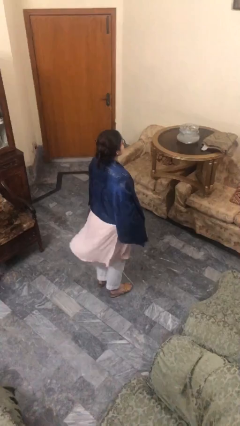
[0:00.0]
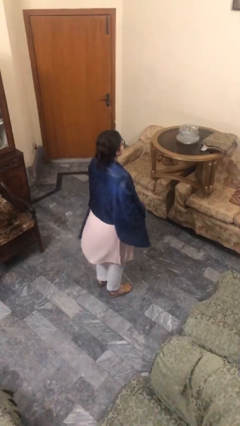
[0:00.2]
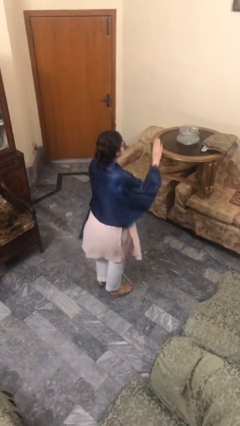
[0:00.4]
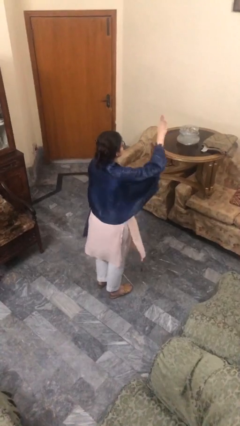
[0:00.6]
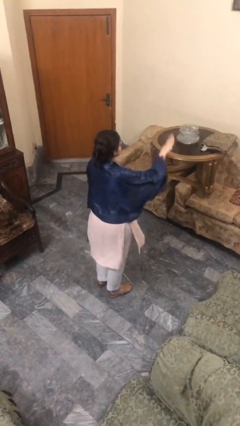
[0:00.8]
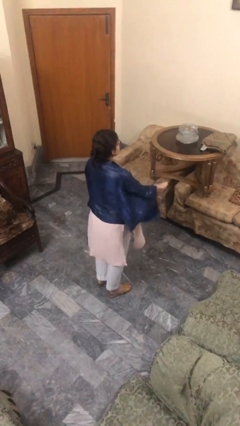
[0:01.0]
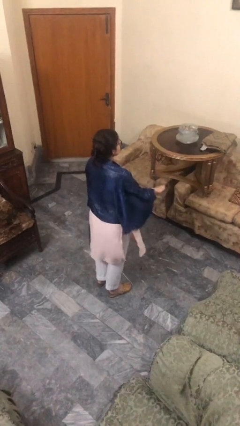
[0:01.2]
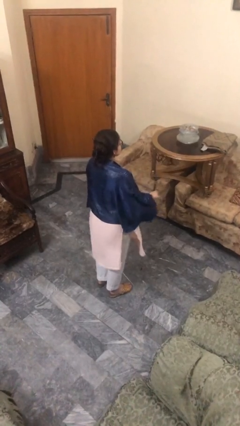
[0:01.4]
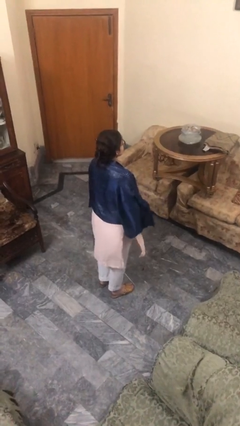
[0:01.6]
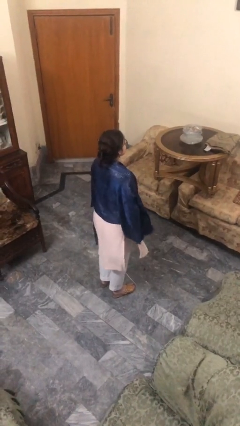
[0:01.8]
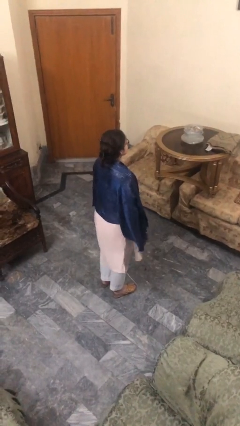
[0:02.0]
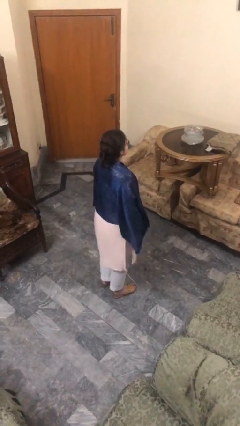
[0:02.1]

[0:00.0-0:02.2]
person gestures swipe down

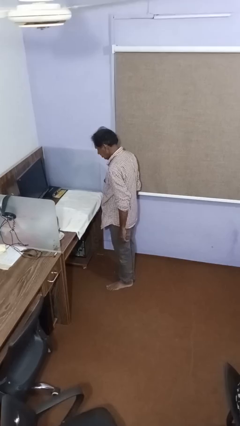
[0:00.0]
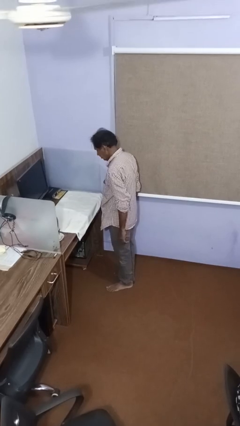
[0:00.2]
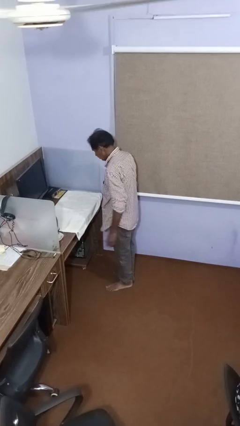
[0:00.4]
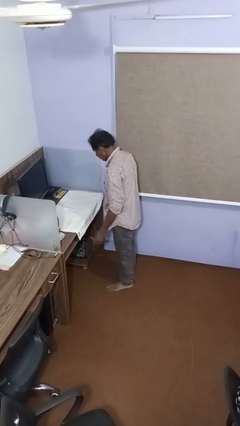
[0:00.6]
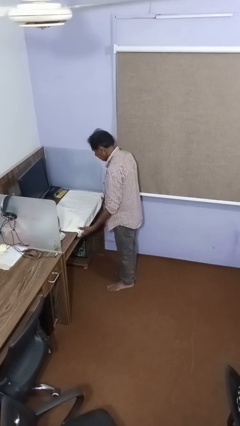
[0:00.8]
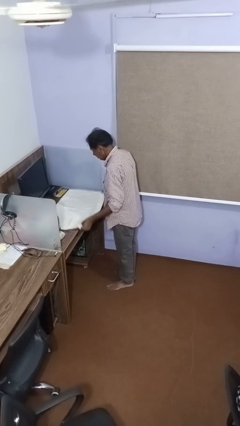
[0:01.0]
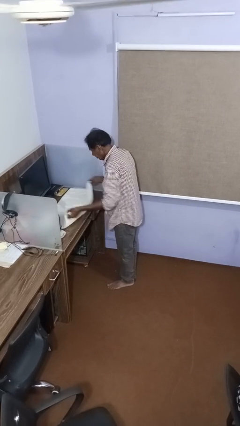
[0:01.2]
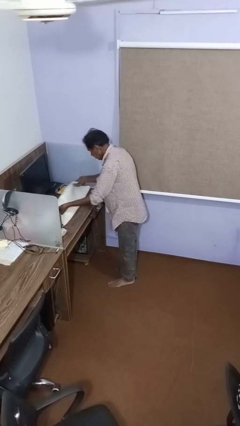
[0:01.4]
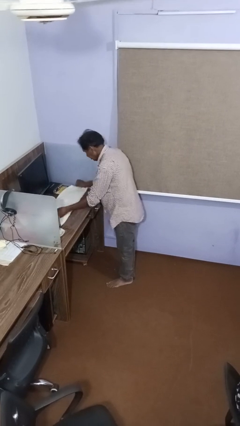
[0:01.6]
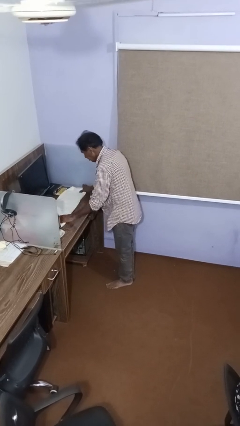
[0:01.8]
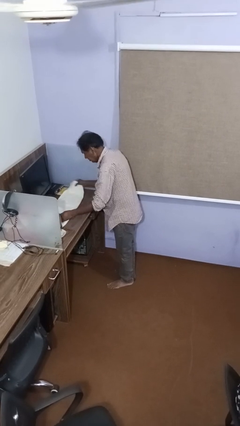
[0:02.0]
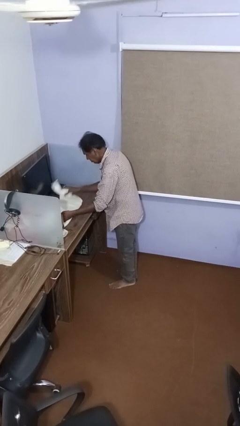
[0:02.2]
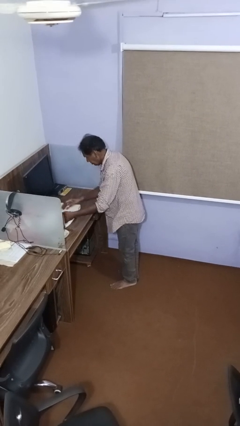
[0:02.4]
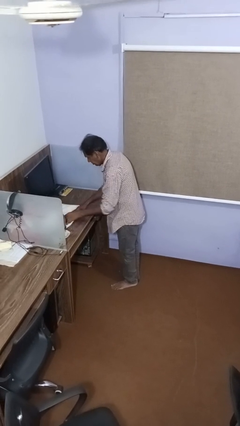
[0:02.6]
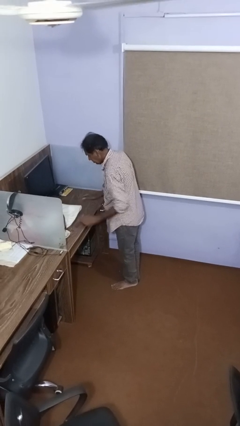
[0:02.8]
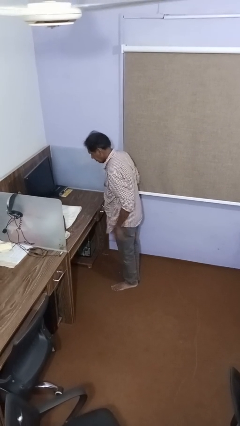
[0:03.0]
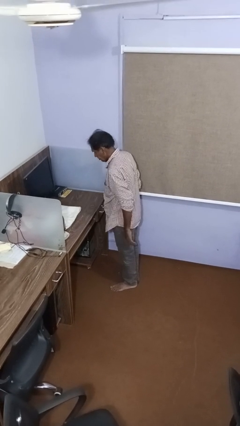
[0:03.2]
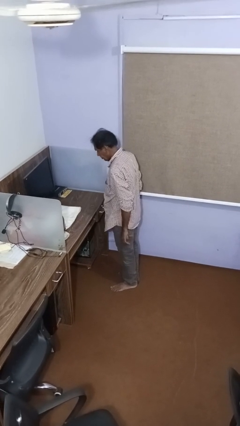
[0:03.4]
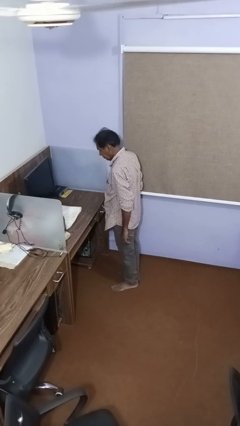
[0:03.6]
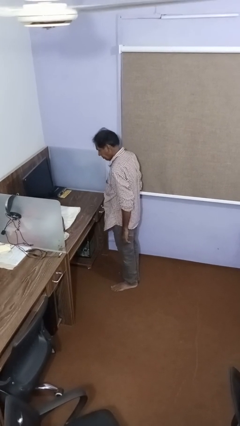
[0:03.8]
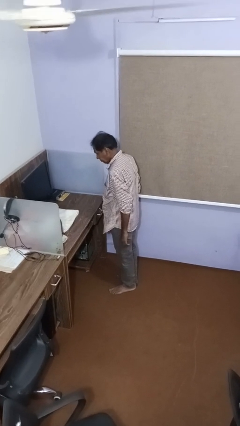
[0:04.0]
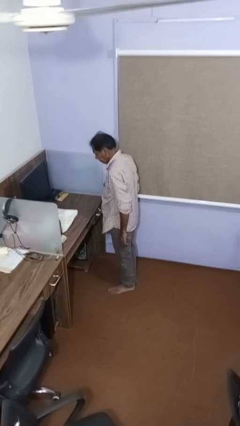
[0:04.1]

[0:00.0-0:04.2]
person folds towel

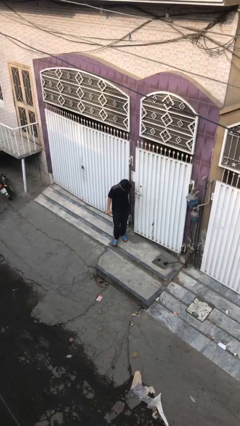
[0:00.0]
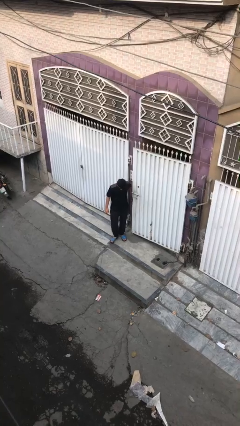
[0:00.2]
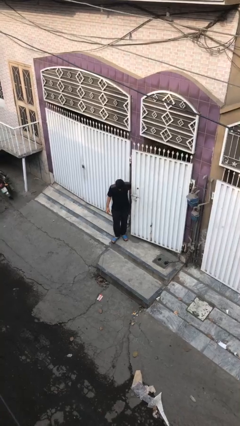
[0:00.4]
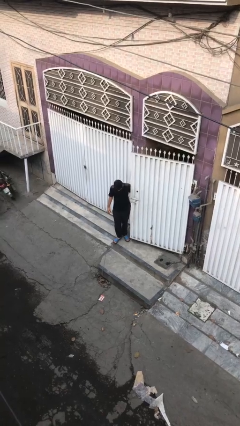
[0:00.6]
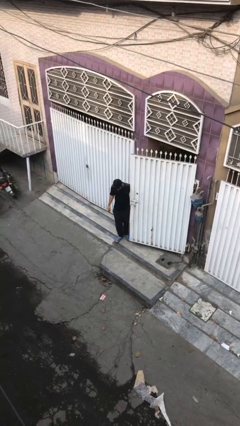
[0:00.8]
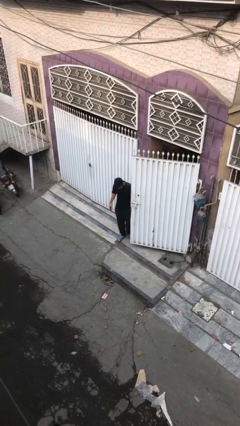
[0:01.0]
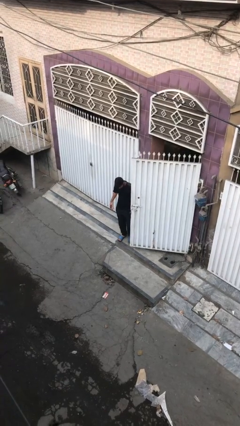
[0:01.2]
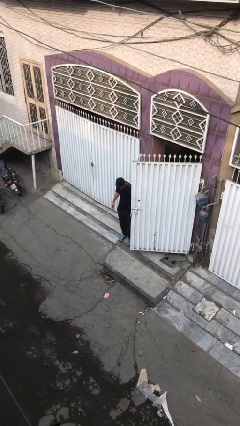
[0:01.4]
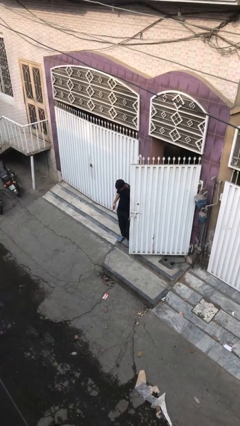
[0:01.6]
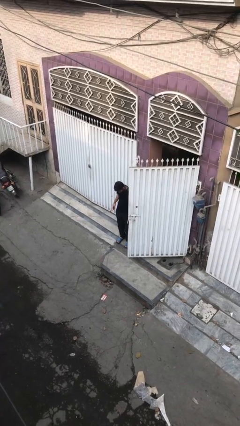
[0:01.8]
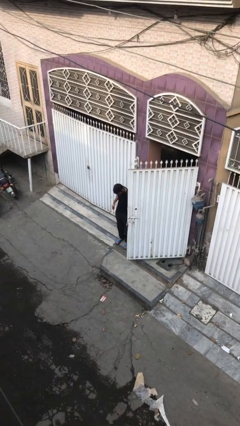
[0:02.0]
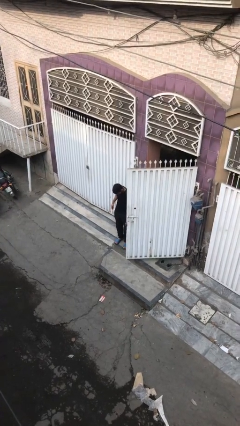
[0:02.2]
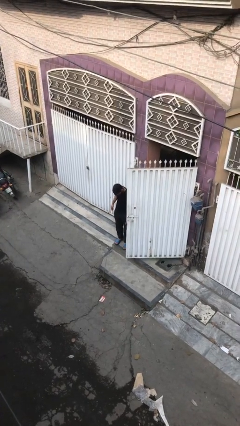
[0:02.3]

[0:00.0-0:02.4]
person opens facility door

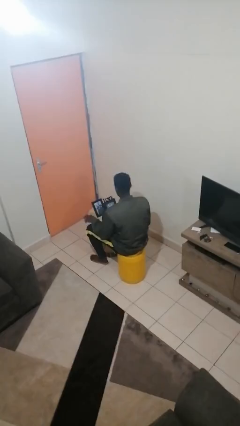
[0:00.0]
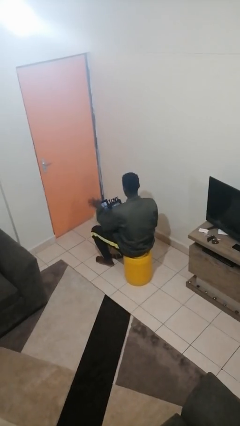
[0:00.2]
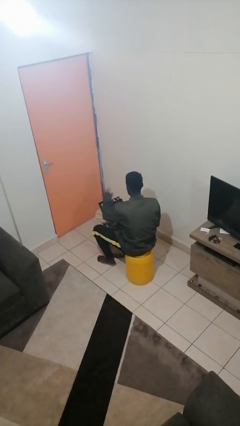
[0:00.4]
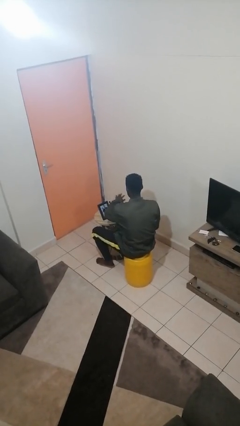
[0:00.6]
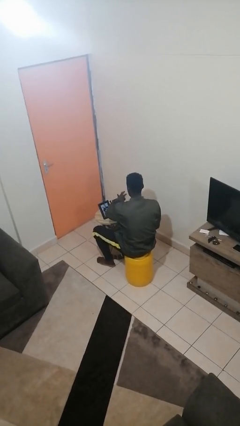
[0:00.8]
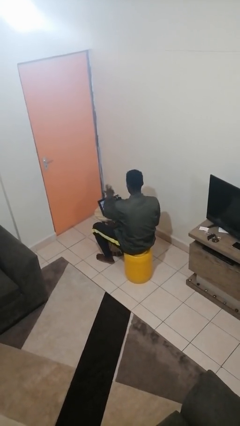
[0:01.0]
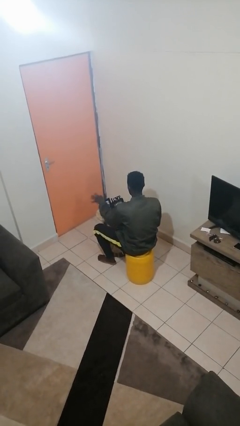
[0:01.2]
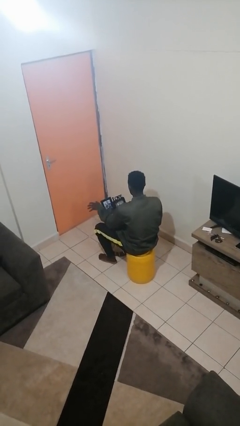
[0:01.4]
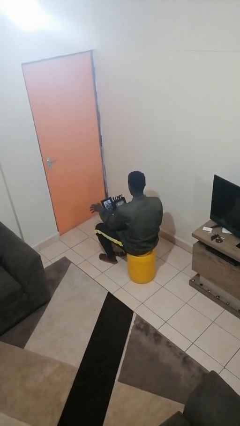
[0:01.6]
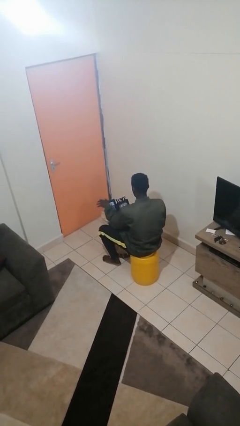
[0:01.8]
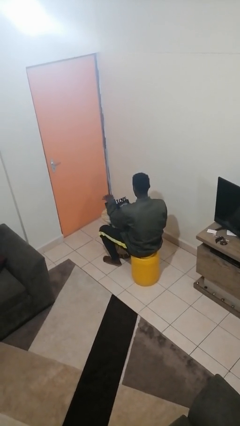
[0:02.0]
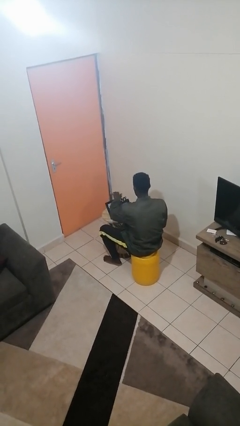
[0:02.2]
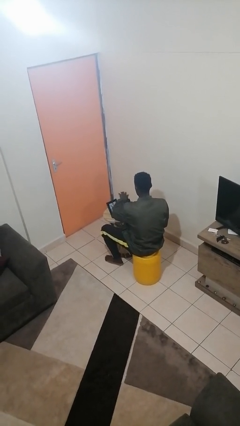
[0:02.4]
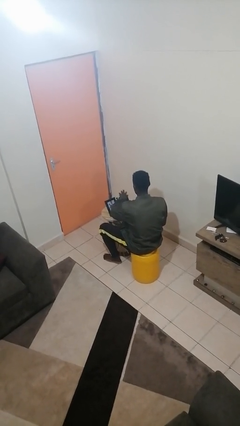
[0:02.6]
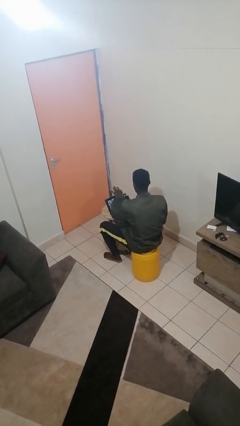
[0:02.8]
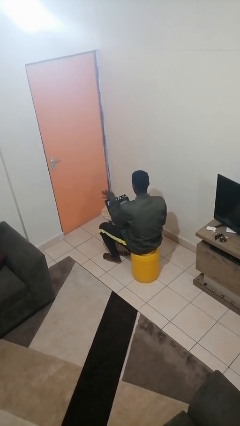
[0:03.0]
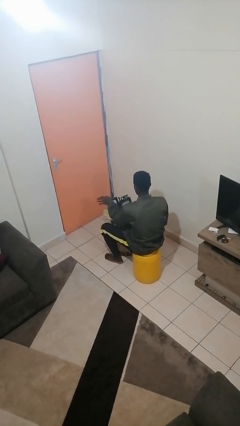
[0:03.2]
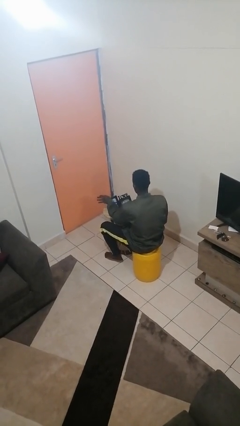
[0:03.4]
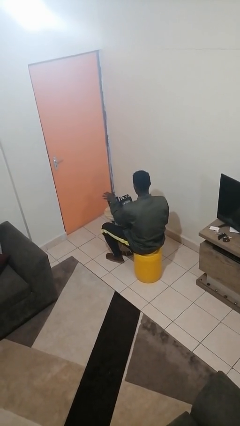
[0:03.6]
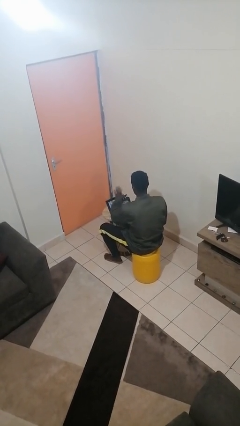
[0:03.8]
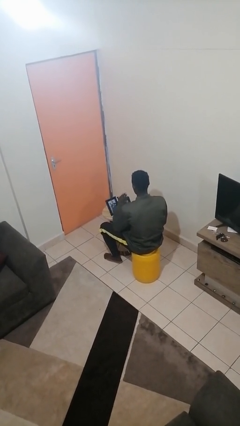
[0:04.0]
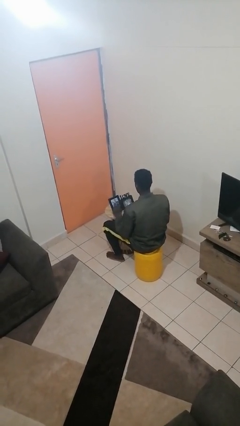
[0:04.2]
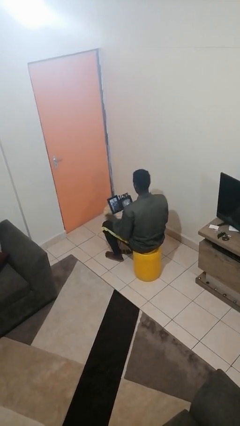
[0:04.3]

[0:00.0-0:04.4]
person waves hand over object

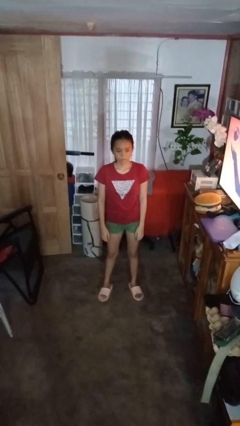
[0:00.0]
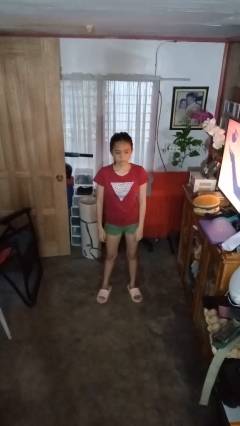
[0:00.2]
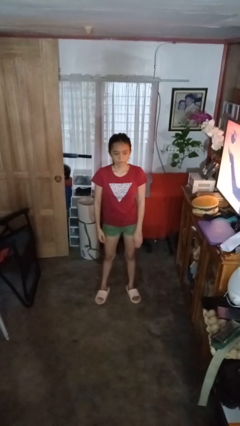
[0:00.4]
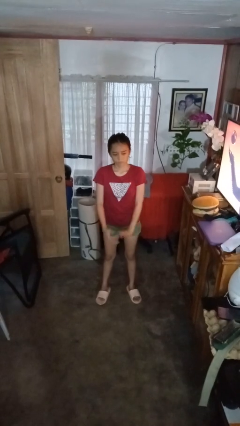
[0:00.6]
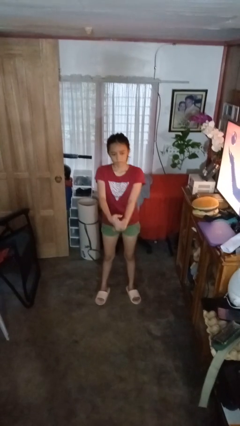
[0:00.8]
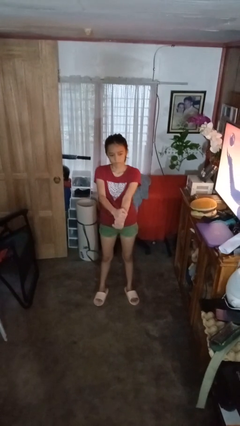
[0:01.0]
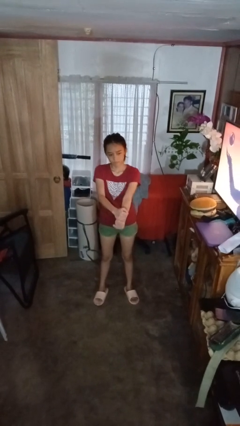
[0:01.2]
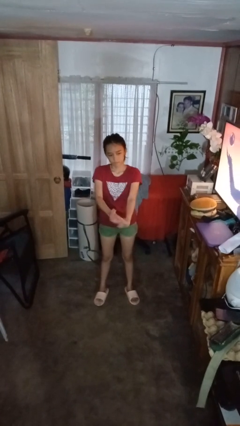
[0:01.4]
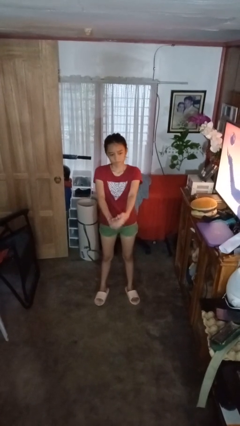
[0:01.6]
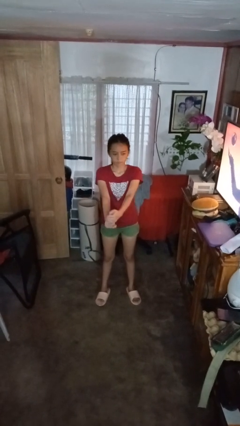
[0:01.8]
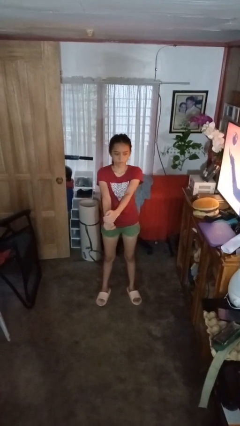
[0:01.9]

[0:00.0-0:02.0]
person cracks knuckles

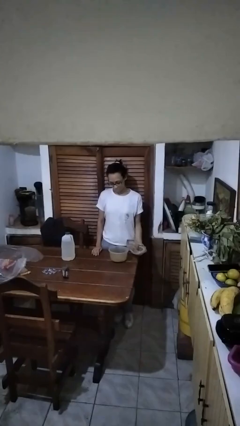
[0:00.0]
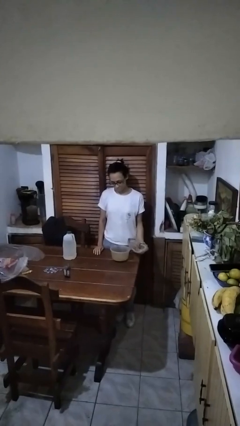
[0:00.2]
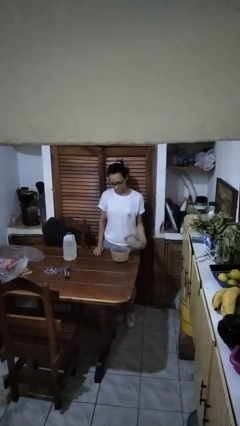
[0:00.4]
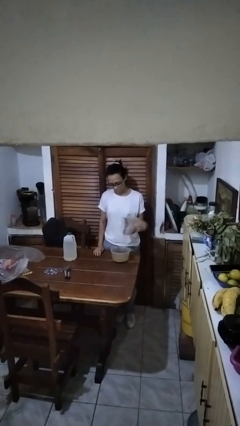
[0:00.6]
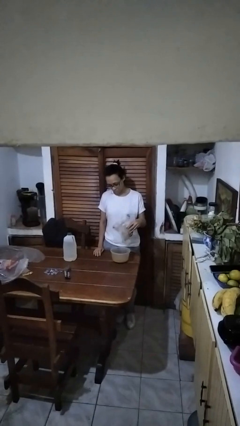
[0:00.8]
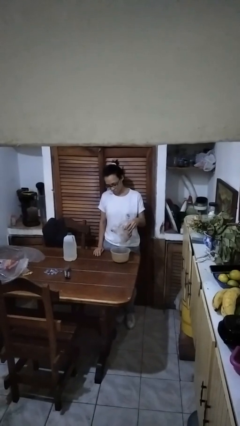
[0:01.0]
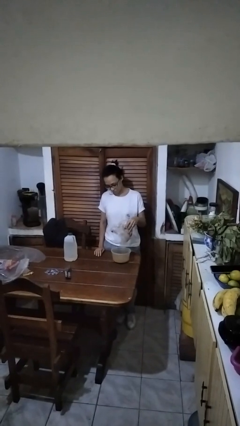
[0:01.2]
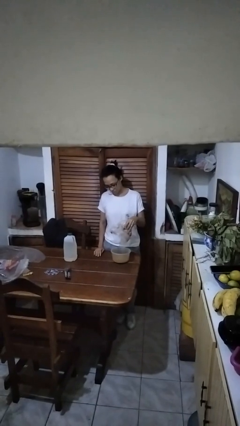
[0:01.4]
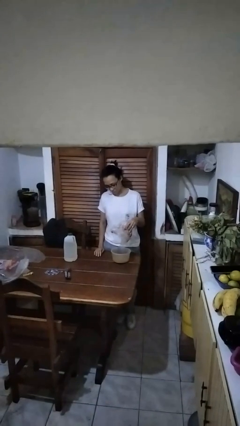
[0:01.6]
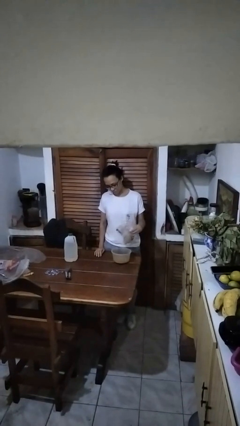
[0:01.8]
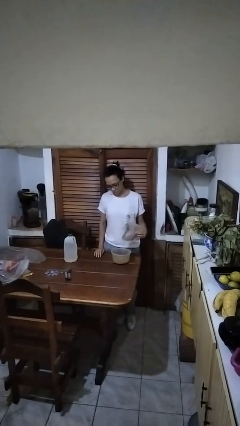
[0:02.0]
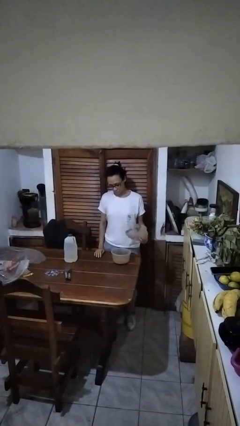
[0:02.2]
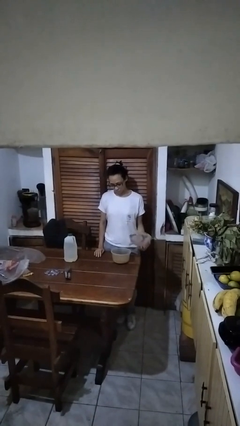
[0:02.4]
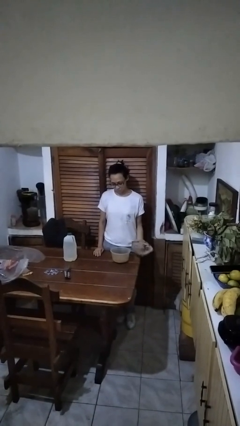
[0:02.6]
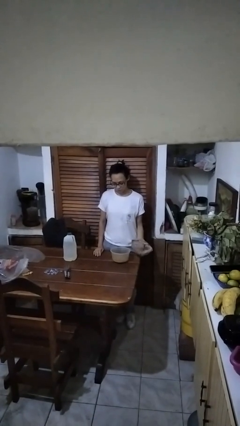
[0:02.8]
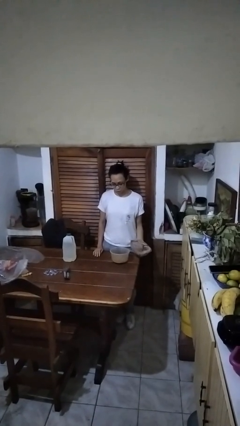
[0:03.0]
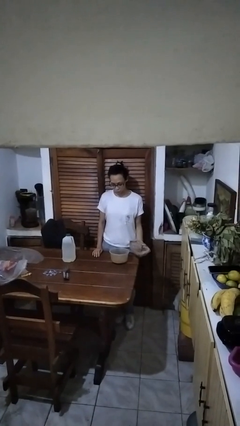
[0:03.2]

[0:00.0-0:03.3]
person pours into bowl
